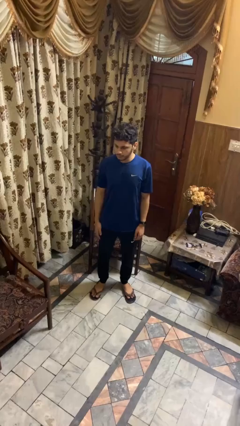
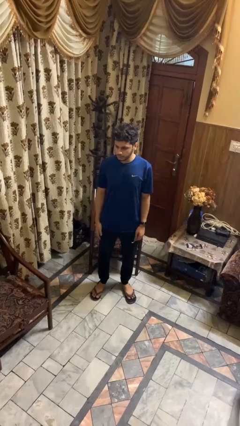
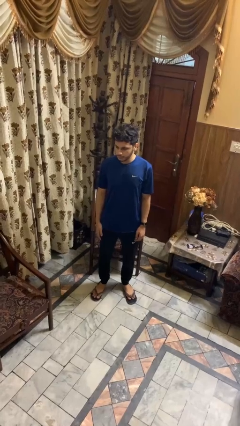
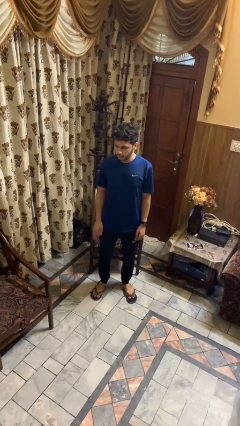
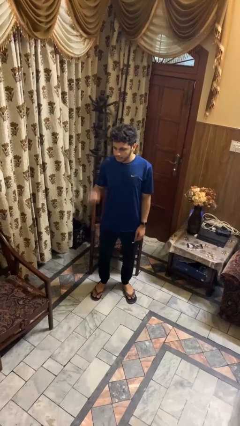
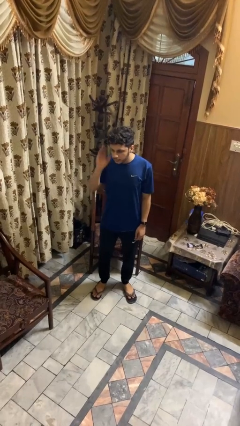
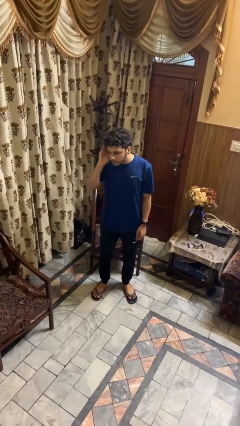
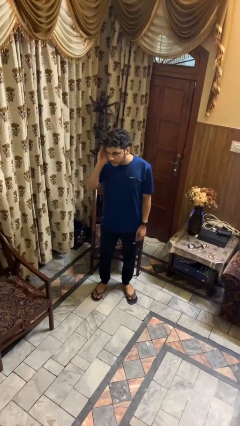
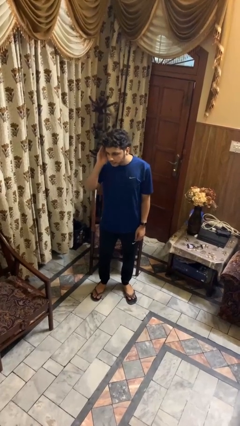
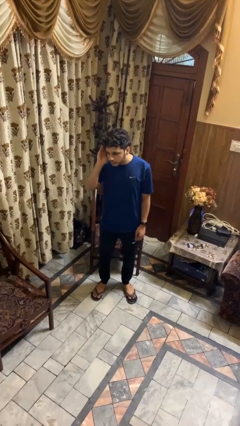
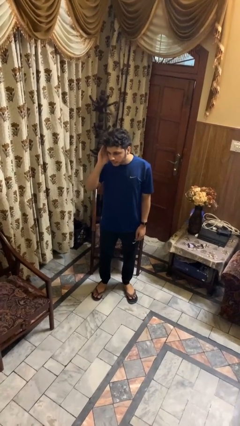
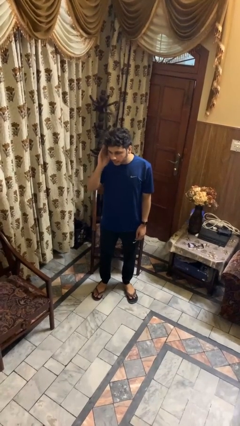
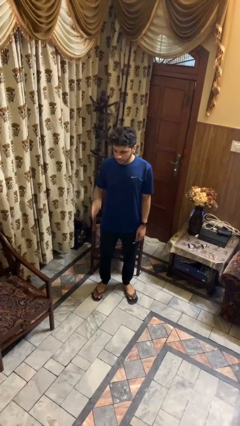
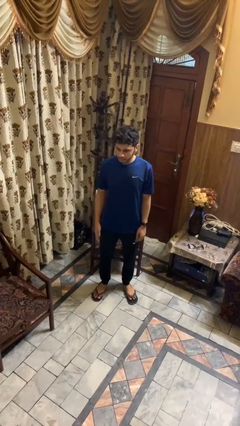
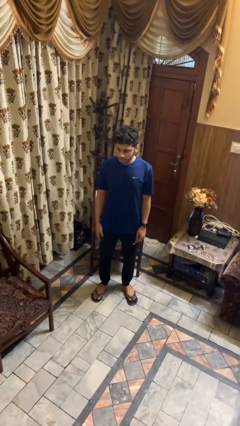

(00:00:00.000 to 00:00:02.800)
person gestures listen closely

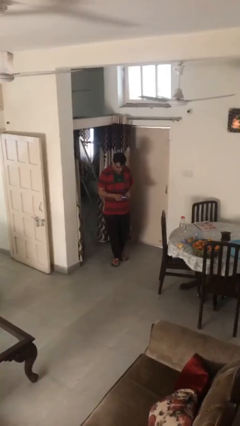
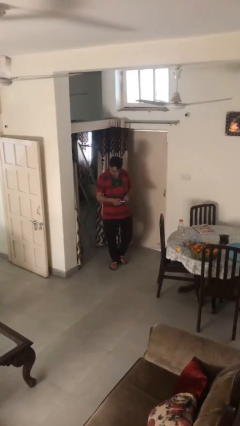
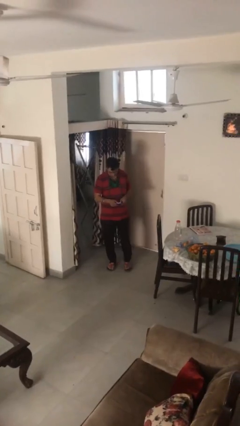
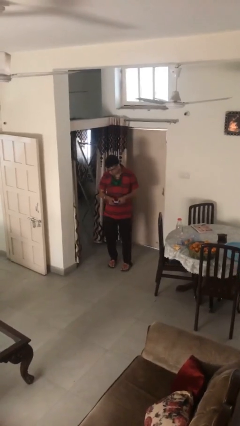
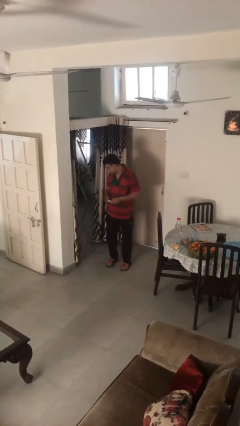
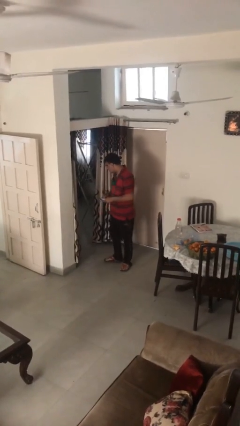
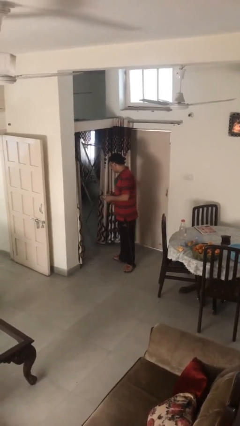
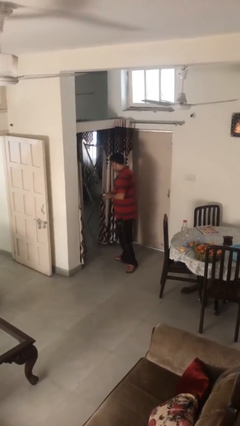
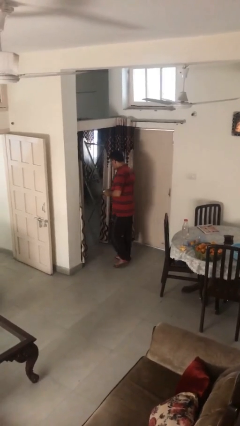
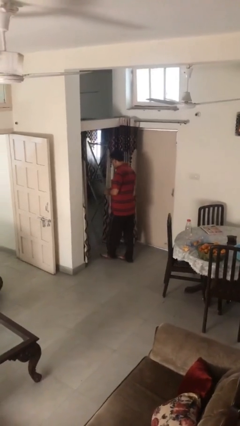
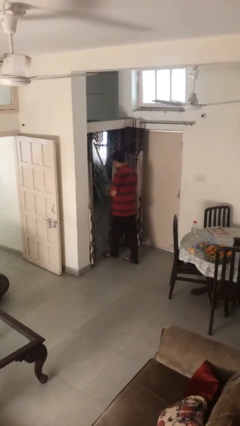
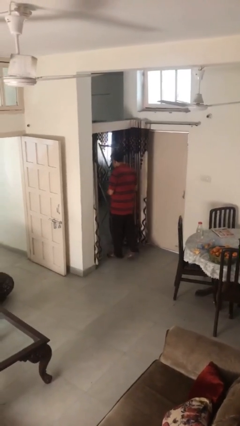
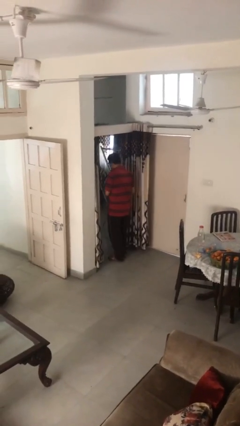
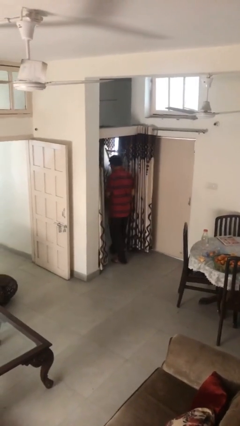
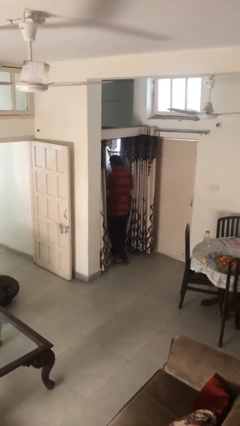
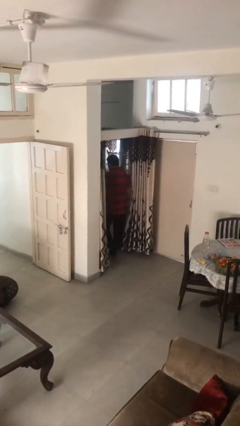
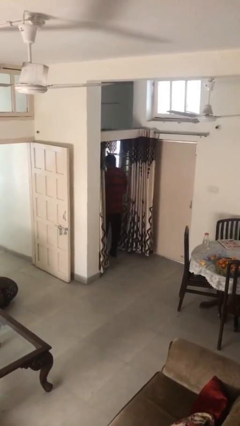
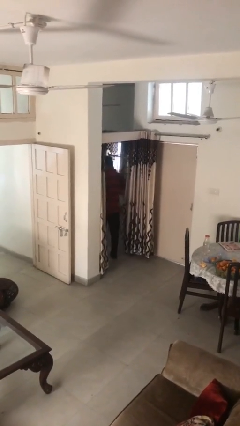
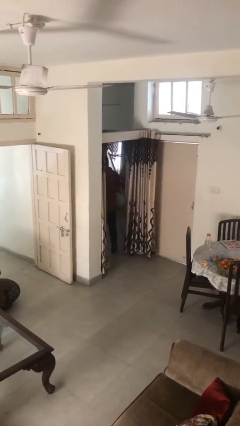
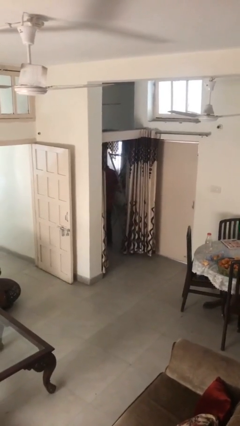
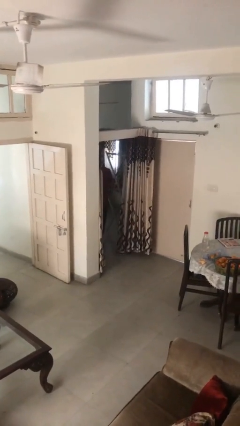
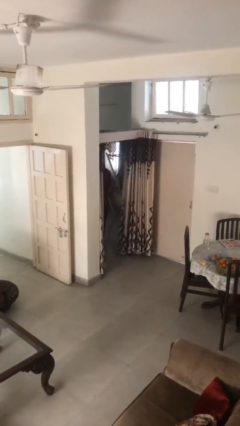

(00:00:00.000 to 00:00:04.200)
person exits scene through structure

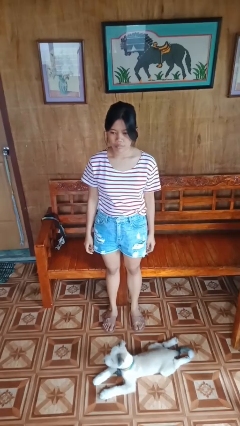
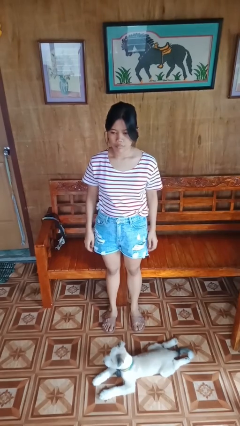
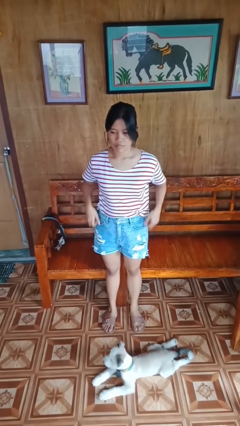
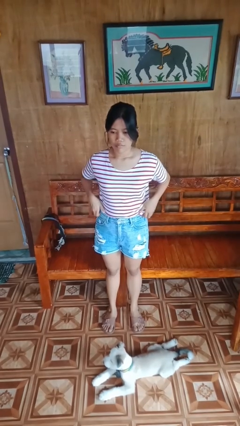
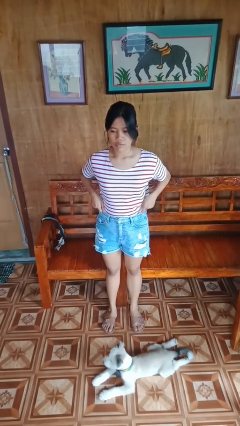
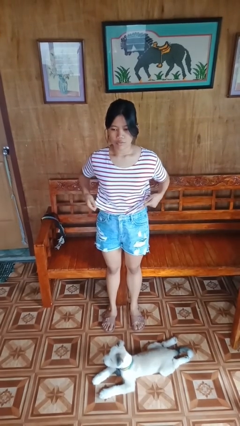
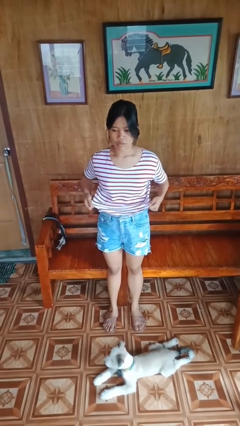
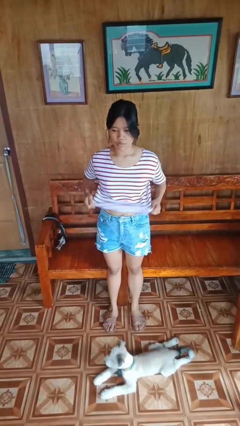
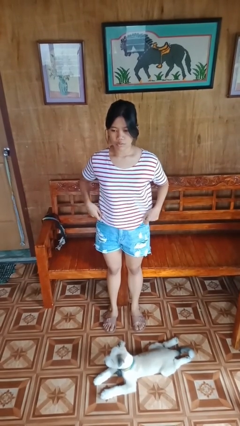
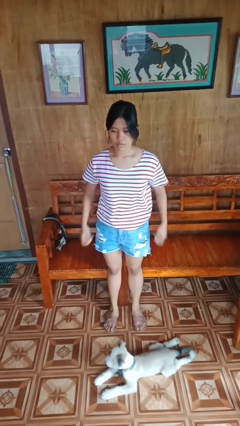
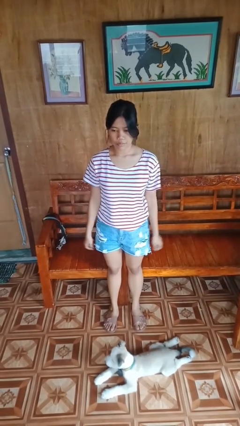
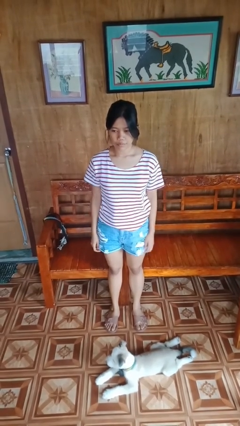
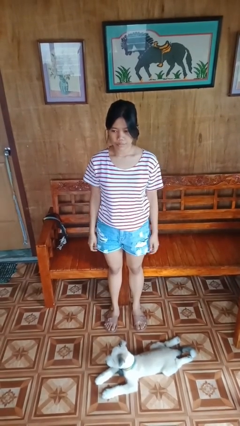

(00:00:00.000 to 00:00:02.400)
person untucks shirt

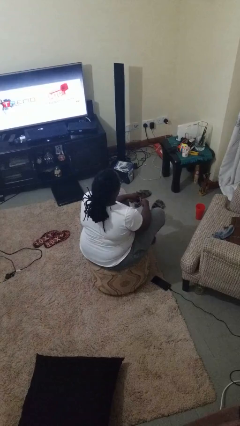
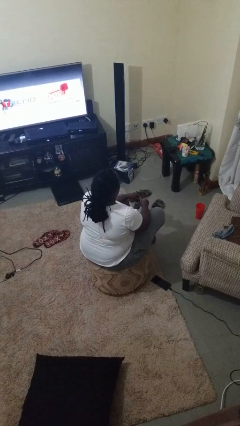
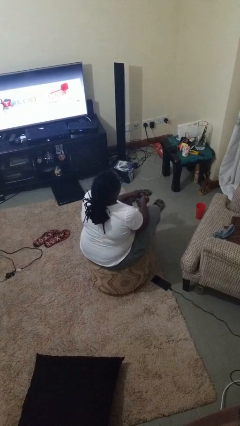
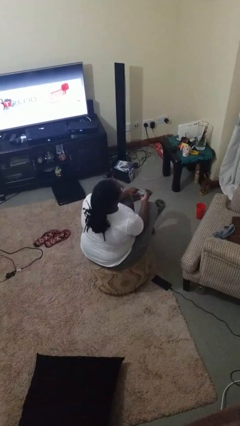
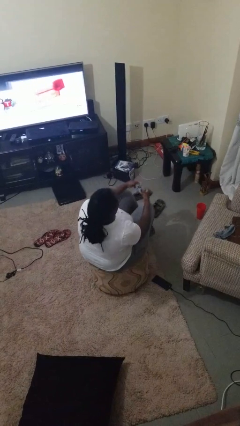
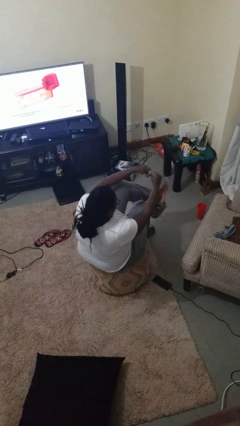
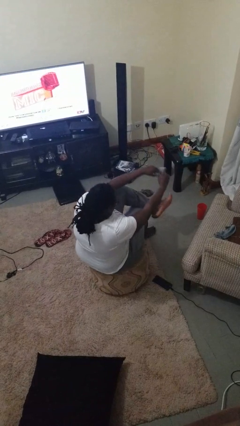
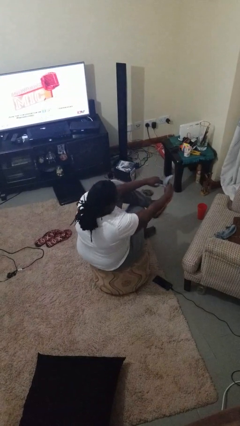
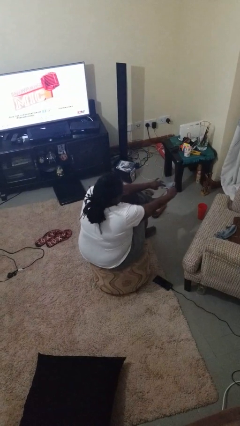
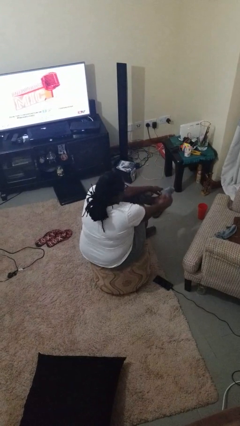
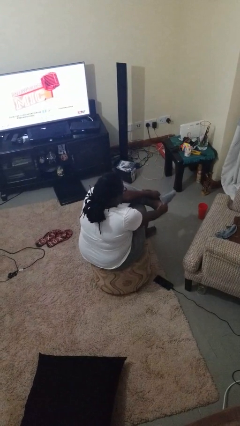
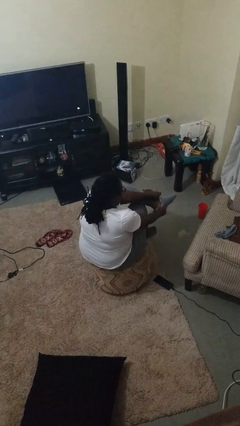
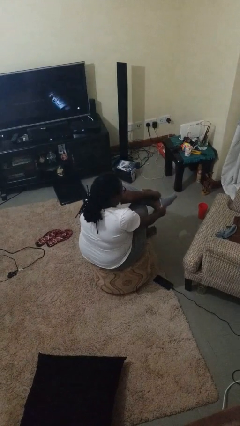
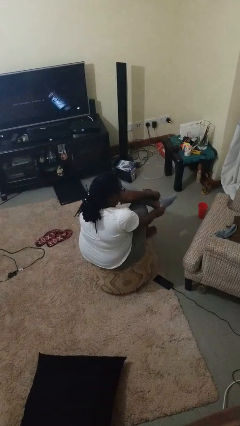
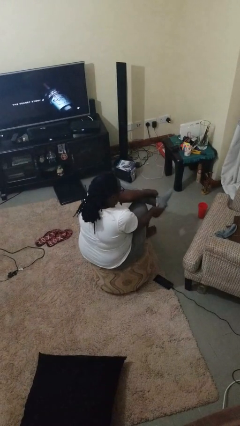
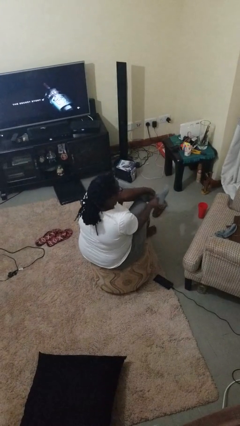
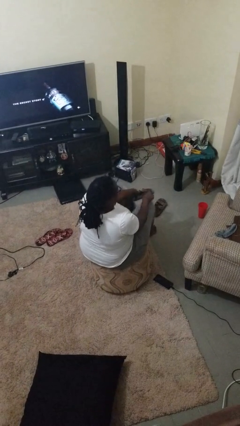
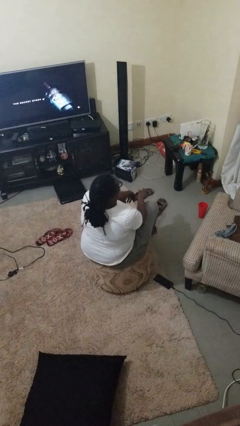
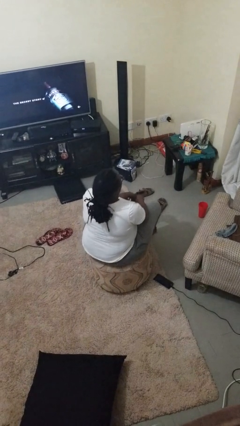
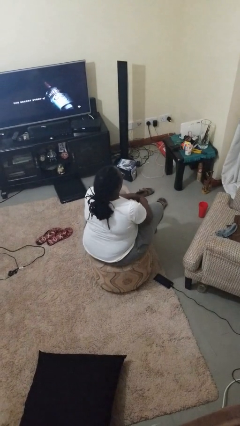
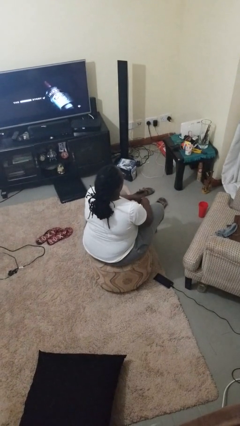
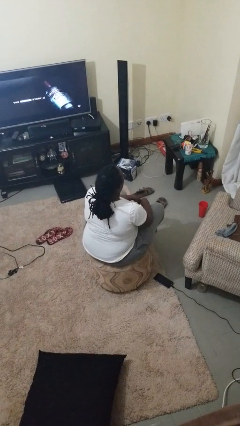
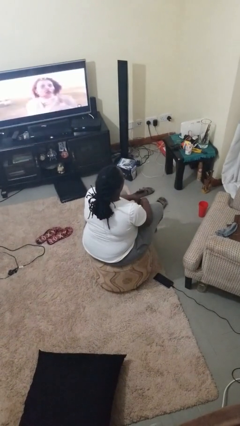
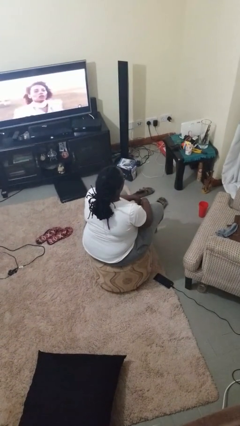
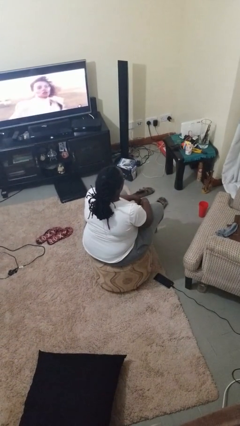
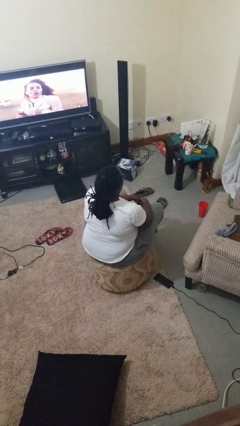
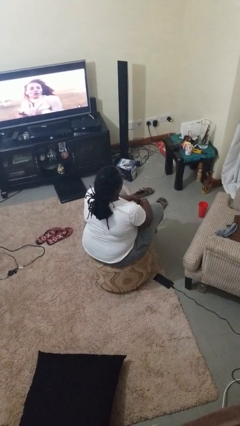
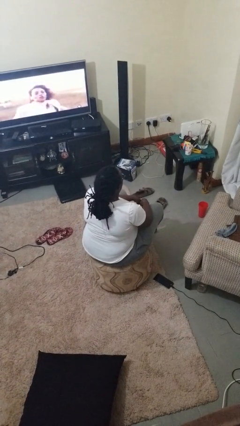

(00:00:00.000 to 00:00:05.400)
person puts on socks

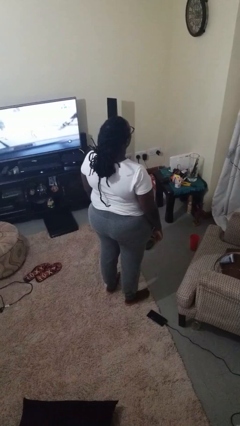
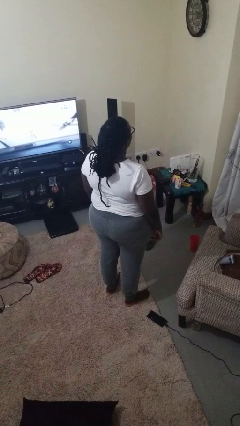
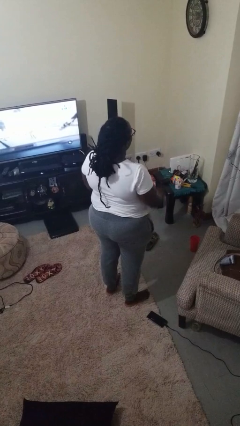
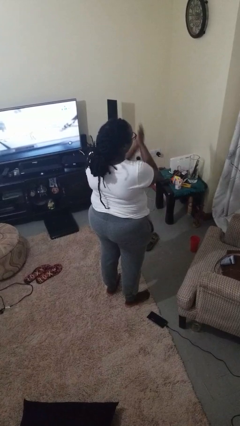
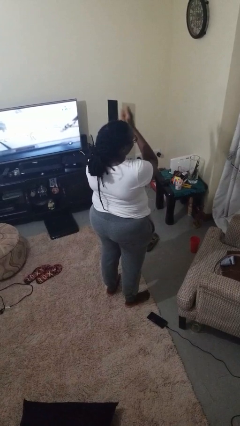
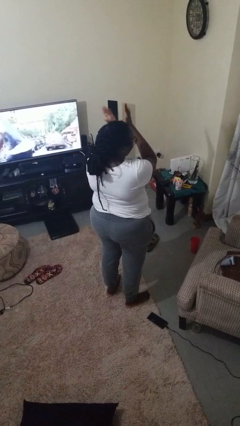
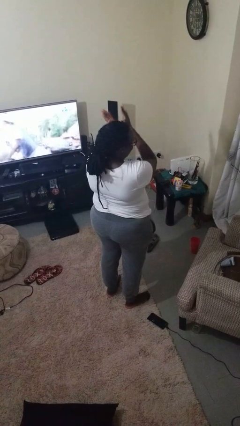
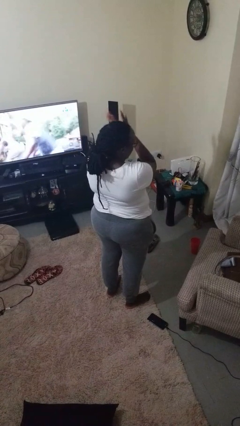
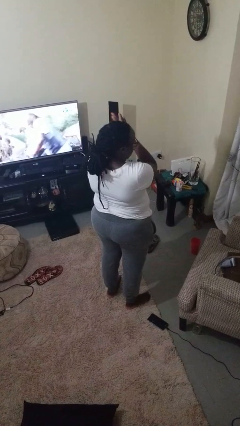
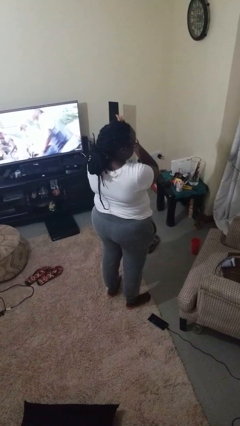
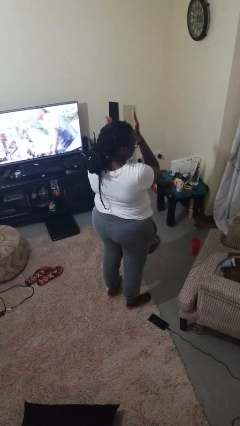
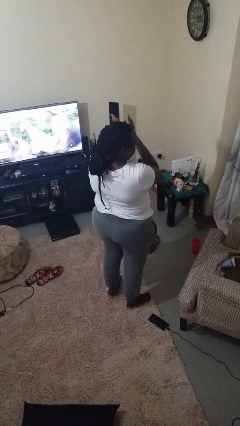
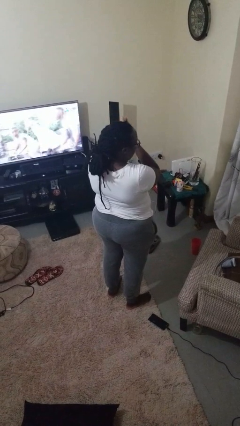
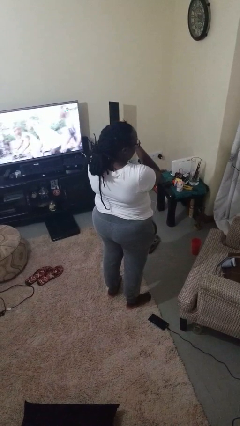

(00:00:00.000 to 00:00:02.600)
person claps hands
